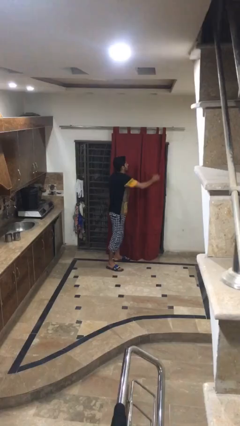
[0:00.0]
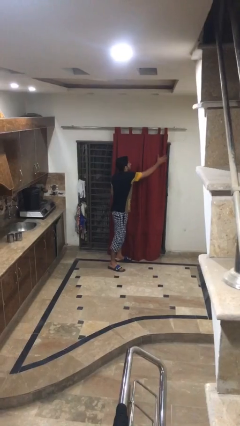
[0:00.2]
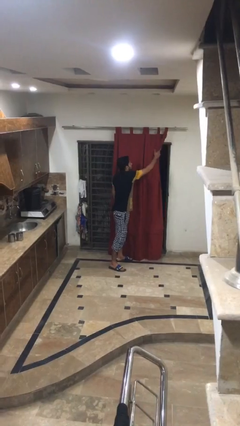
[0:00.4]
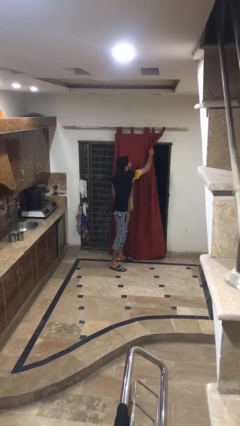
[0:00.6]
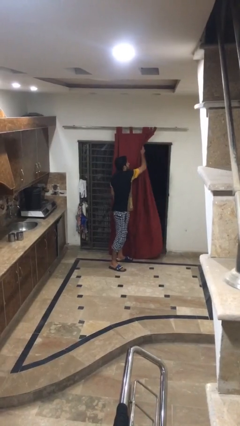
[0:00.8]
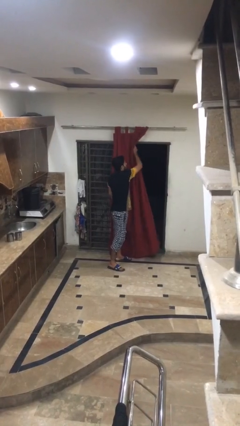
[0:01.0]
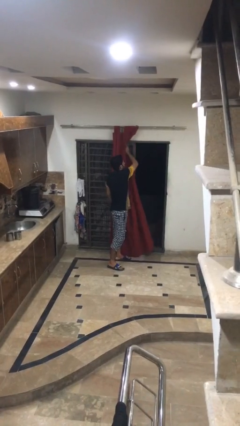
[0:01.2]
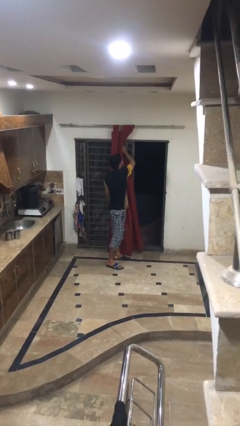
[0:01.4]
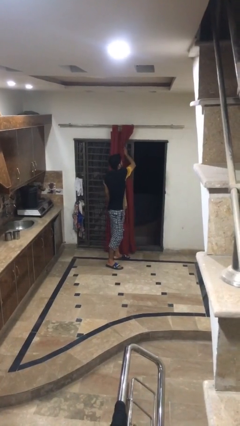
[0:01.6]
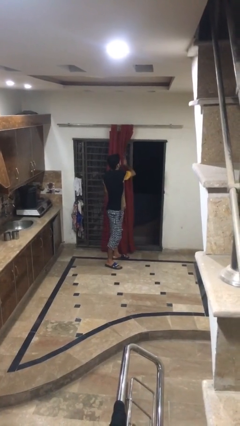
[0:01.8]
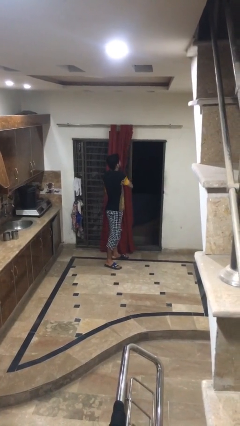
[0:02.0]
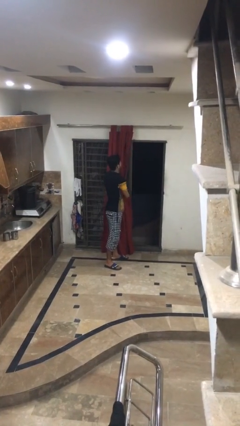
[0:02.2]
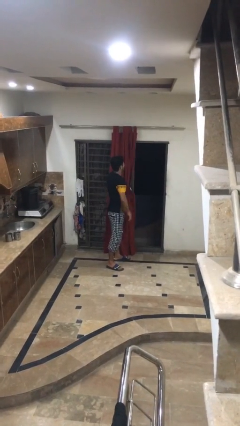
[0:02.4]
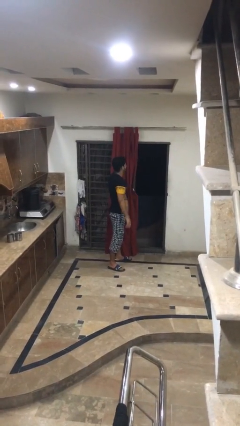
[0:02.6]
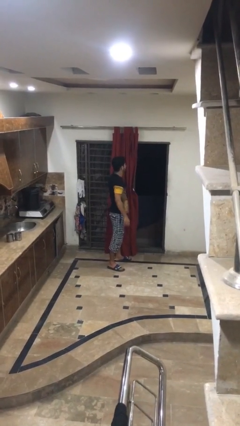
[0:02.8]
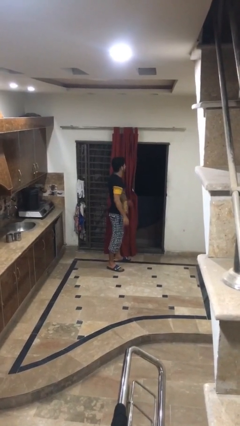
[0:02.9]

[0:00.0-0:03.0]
person opens curtains

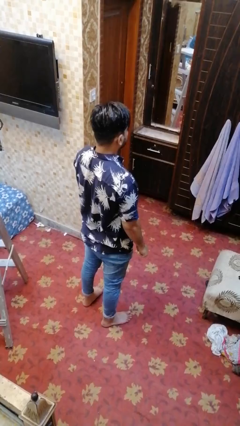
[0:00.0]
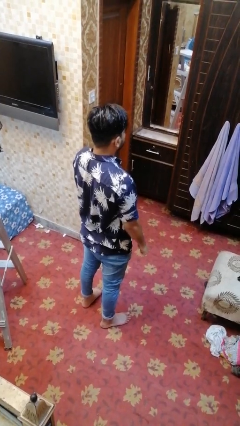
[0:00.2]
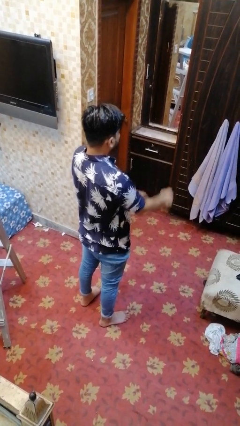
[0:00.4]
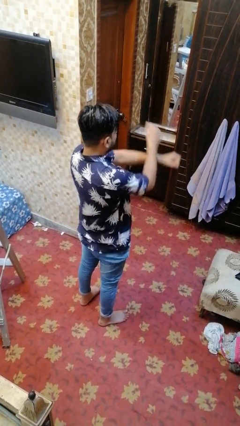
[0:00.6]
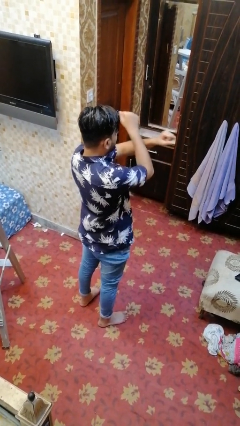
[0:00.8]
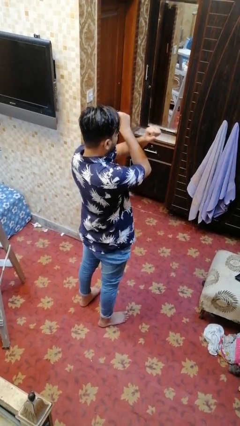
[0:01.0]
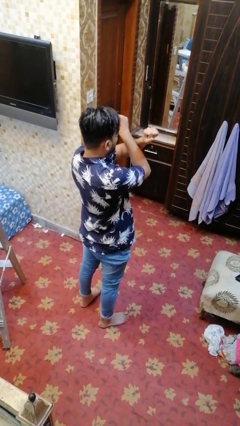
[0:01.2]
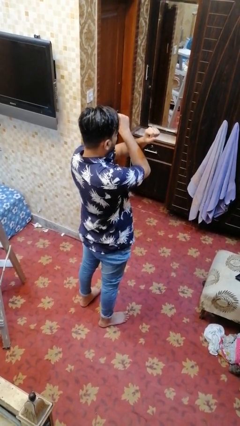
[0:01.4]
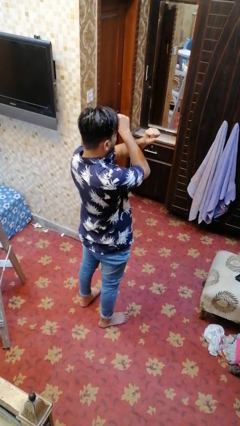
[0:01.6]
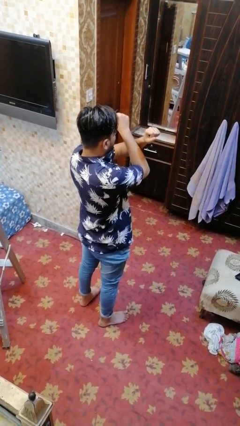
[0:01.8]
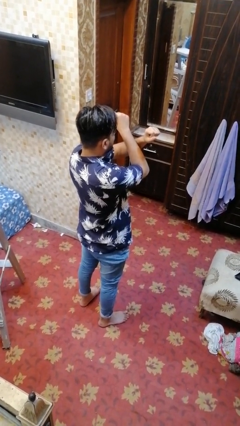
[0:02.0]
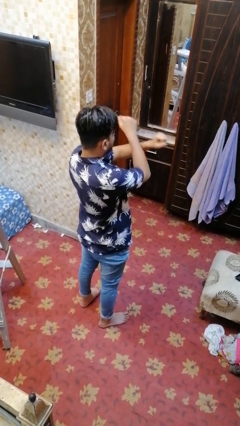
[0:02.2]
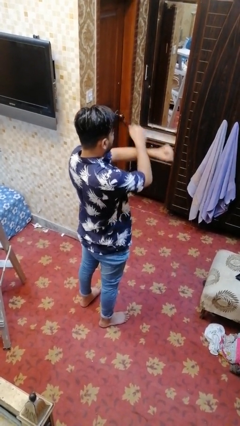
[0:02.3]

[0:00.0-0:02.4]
person crosses arms

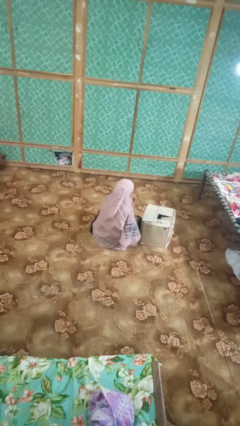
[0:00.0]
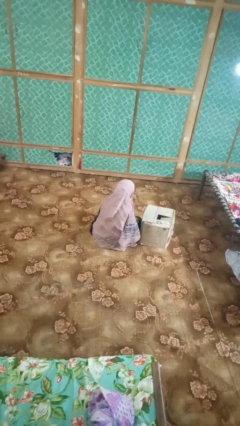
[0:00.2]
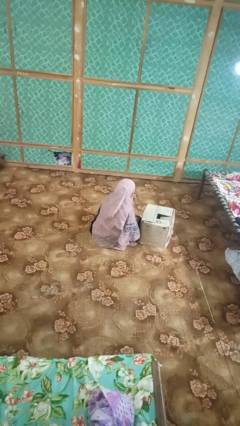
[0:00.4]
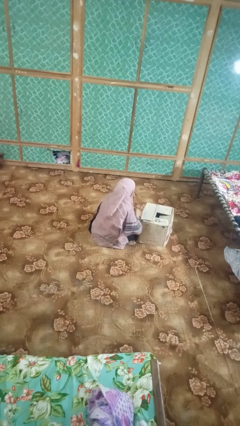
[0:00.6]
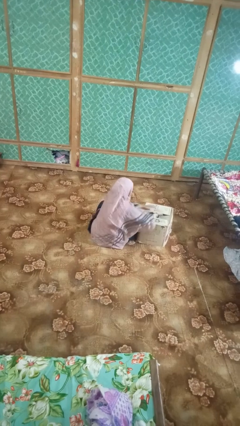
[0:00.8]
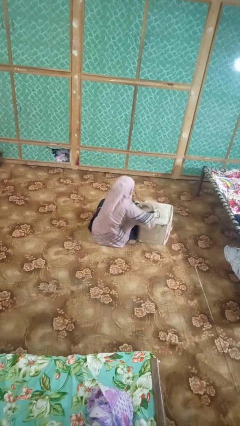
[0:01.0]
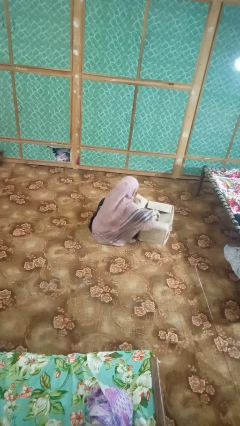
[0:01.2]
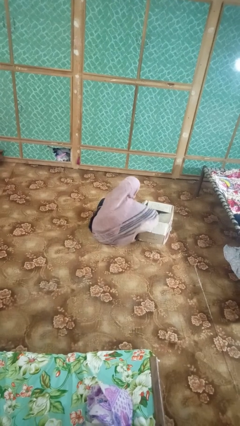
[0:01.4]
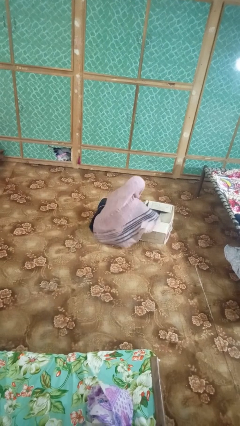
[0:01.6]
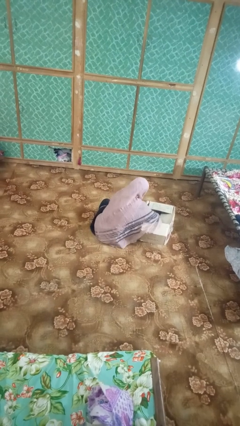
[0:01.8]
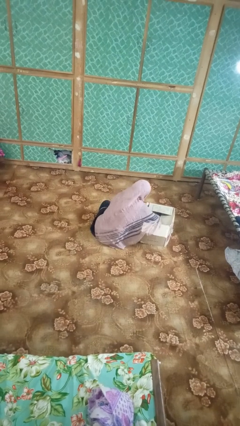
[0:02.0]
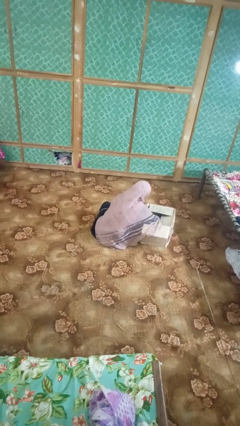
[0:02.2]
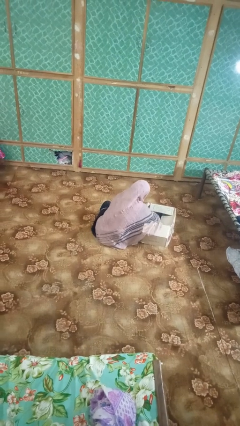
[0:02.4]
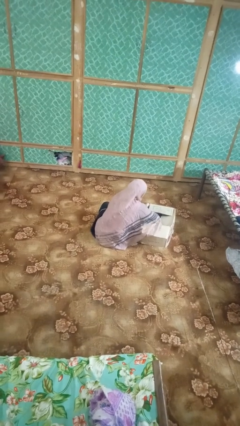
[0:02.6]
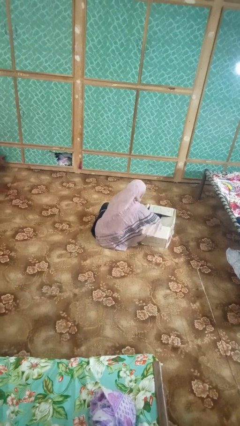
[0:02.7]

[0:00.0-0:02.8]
person searches in box

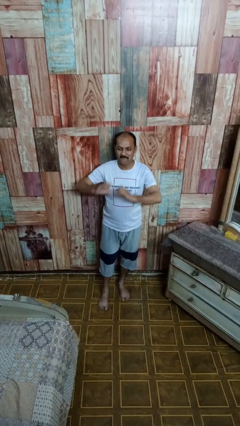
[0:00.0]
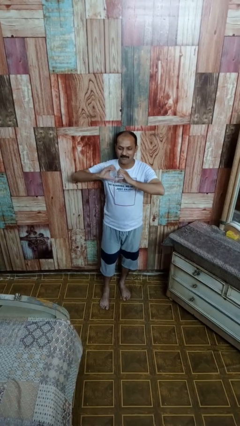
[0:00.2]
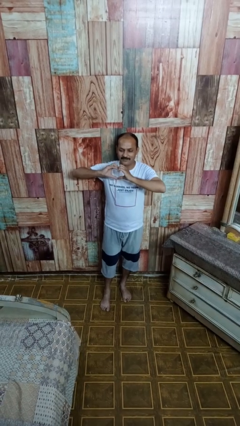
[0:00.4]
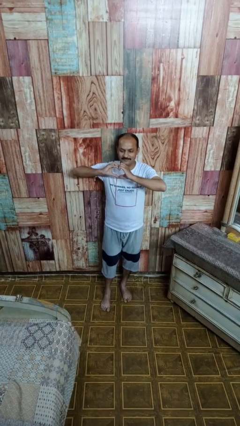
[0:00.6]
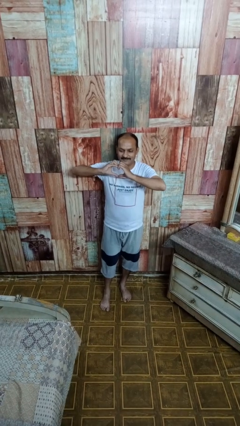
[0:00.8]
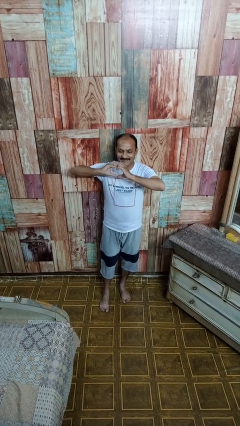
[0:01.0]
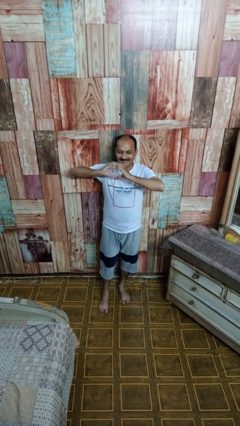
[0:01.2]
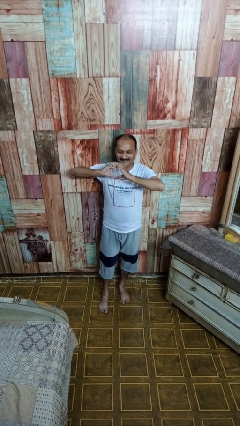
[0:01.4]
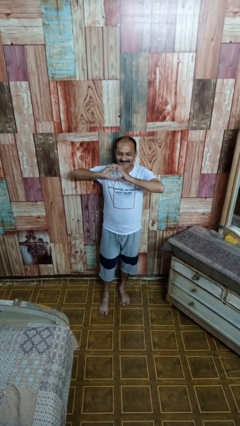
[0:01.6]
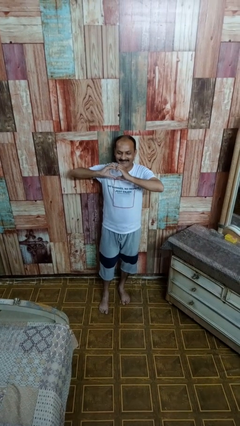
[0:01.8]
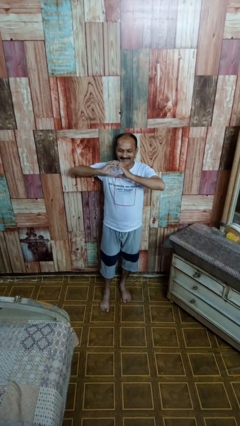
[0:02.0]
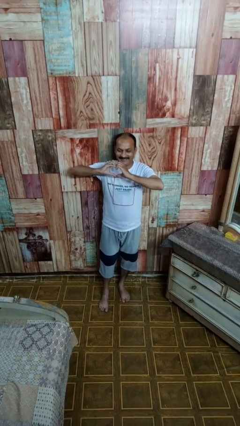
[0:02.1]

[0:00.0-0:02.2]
person gestures heart

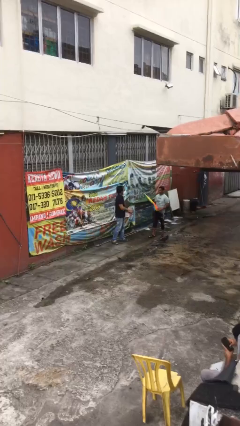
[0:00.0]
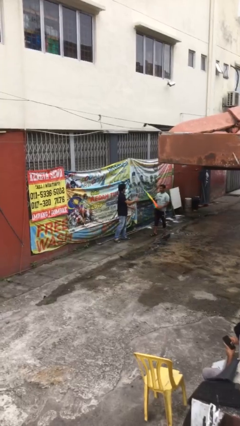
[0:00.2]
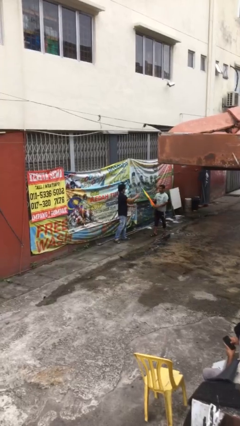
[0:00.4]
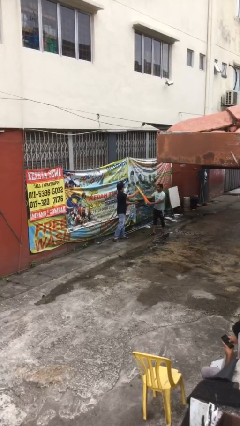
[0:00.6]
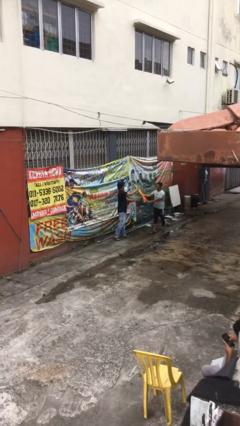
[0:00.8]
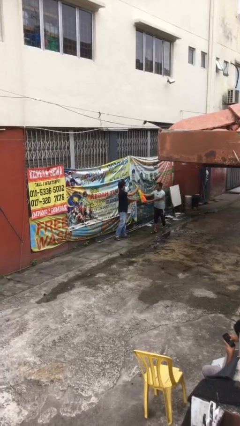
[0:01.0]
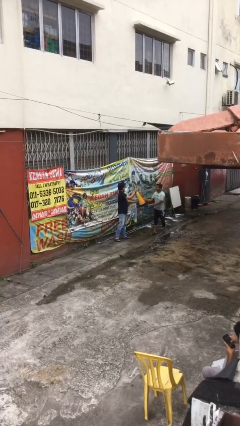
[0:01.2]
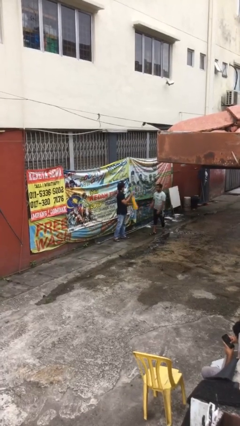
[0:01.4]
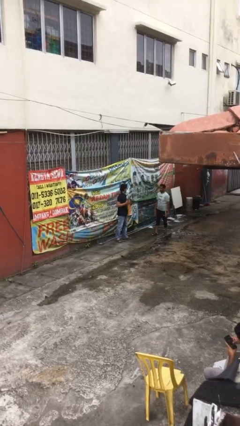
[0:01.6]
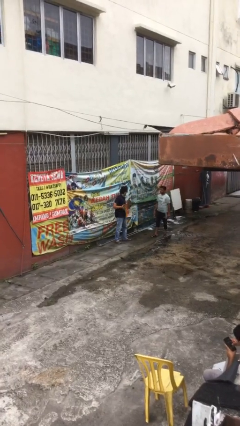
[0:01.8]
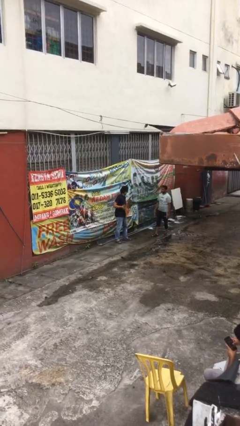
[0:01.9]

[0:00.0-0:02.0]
person transfers object to person

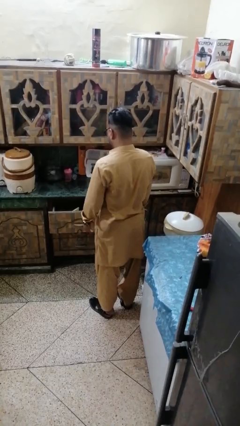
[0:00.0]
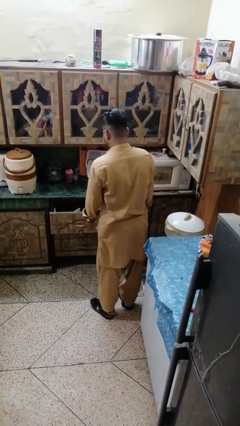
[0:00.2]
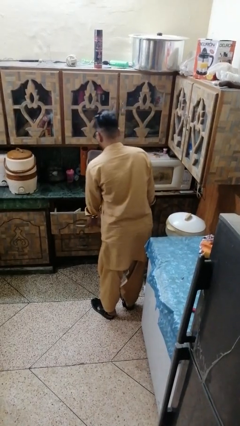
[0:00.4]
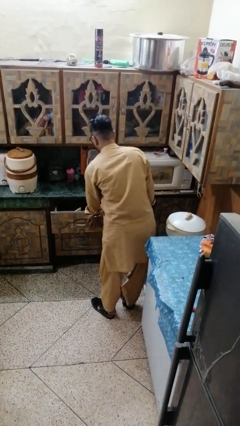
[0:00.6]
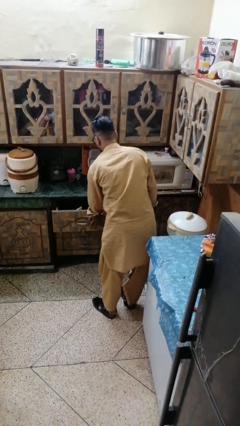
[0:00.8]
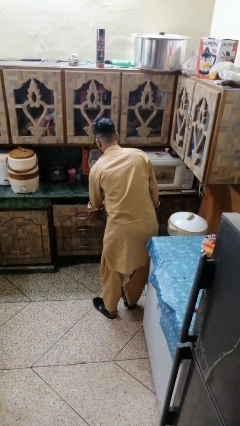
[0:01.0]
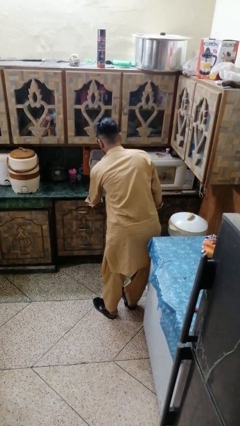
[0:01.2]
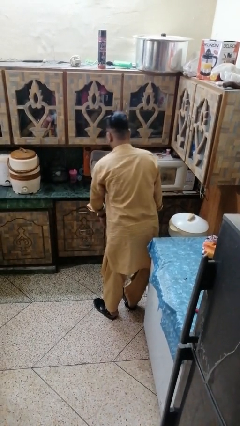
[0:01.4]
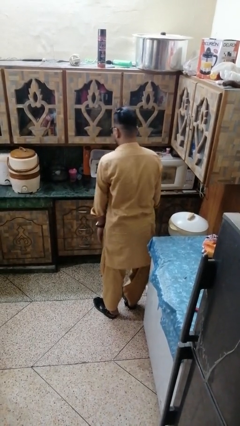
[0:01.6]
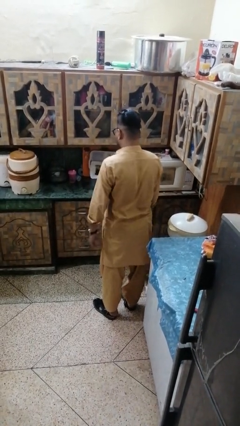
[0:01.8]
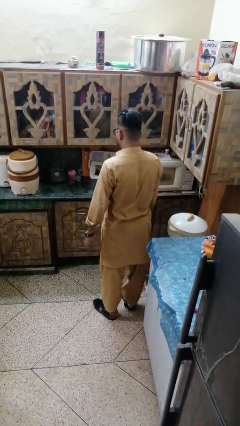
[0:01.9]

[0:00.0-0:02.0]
person closes kitchen drawer

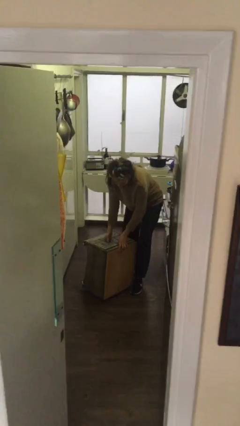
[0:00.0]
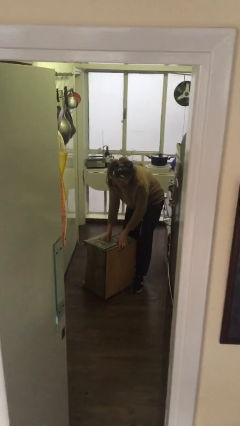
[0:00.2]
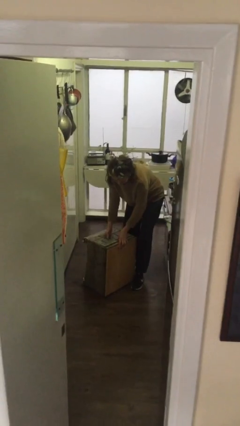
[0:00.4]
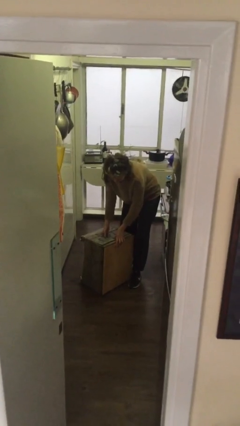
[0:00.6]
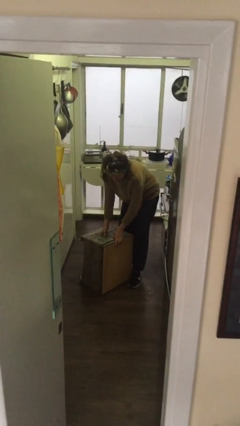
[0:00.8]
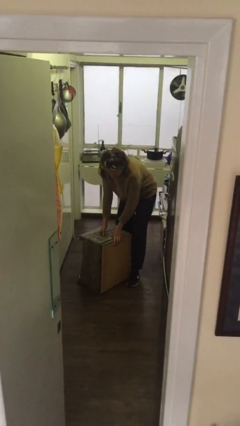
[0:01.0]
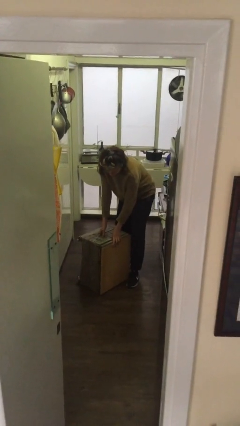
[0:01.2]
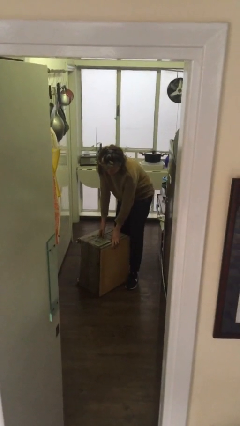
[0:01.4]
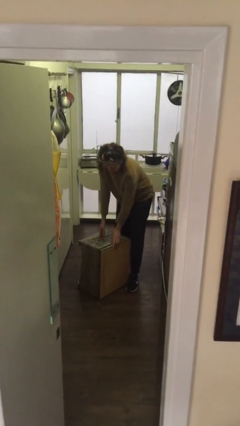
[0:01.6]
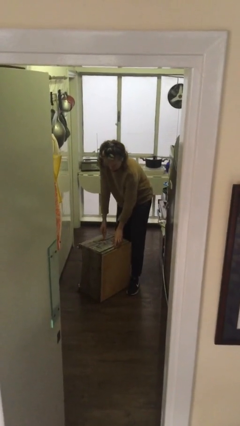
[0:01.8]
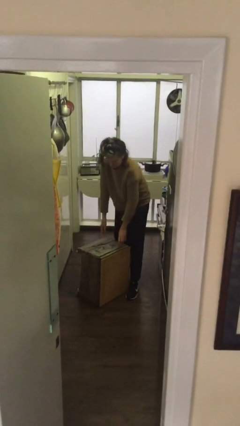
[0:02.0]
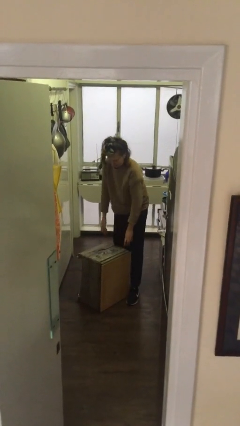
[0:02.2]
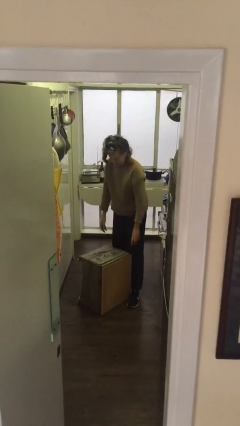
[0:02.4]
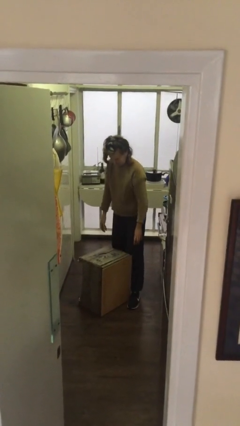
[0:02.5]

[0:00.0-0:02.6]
person puts down object on floor
